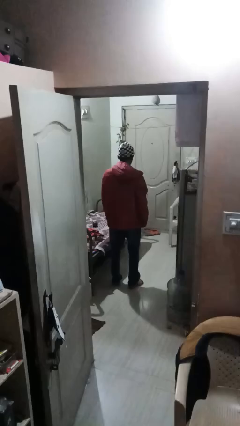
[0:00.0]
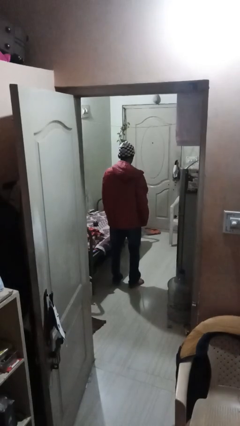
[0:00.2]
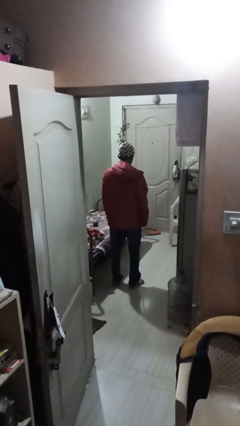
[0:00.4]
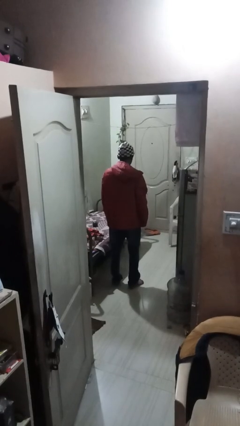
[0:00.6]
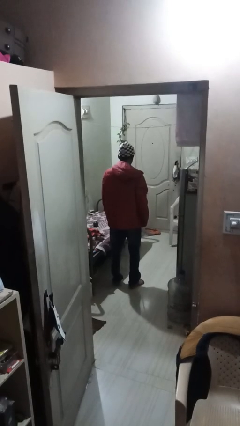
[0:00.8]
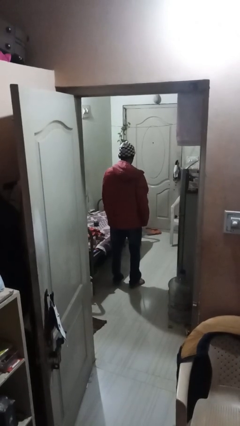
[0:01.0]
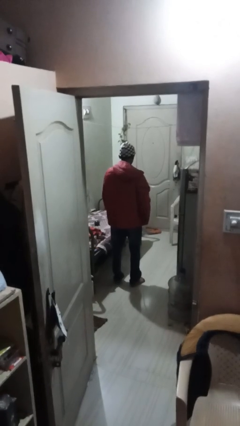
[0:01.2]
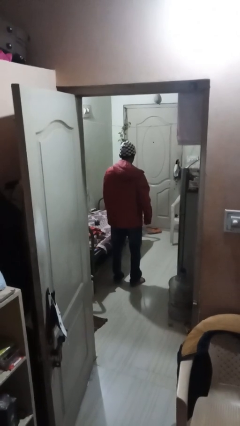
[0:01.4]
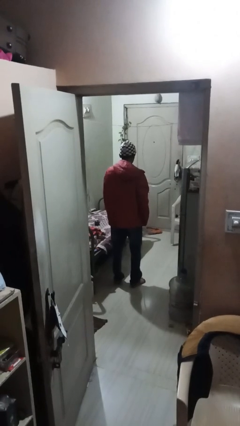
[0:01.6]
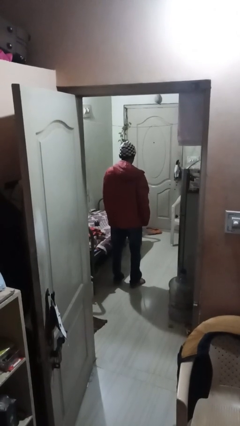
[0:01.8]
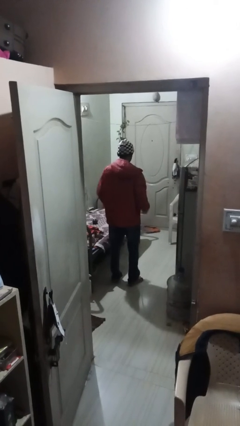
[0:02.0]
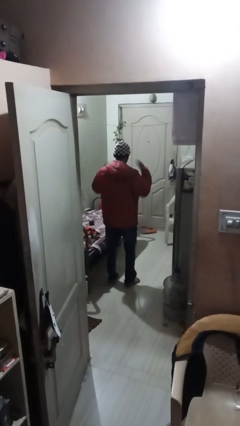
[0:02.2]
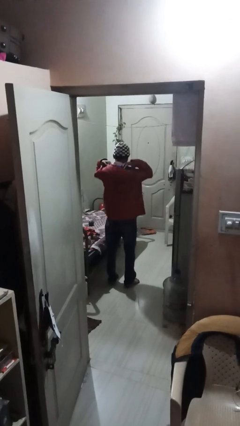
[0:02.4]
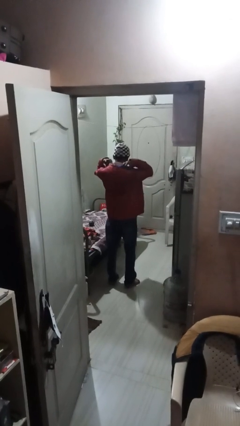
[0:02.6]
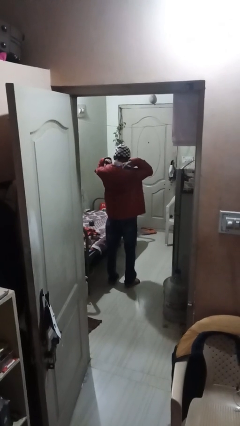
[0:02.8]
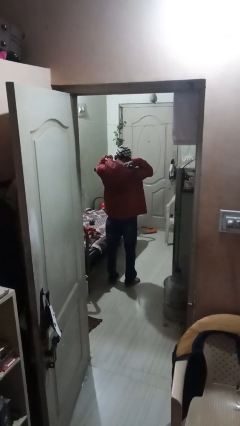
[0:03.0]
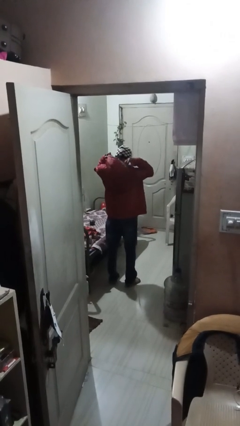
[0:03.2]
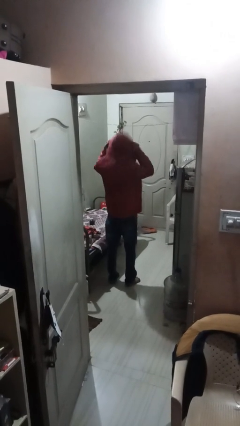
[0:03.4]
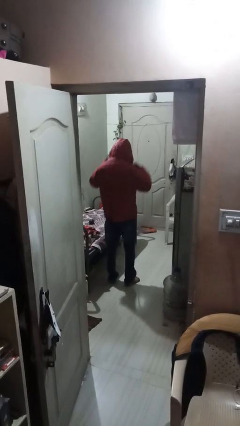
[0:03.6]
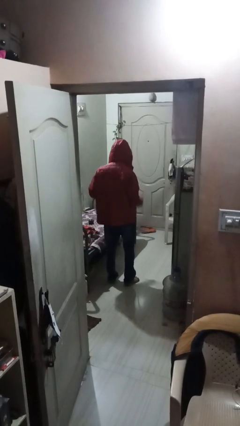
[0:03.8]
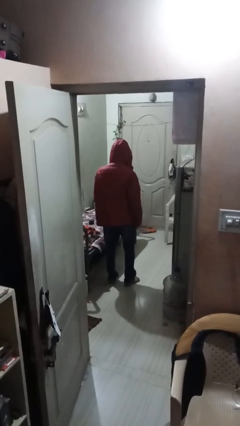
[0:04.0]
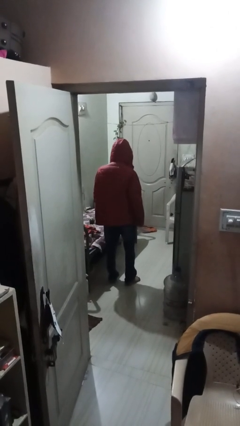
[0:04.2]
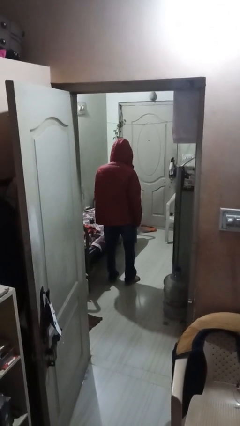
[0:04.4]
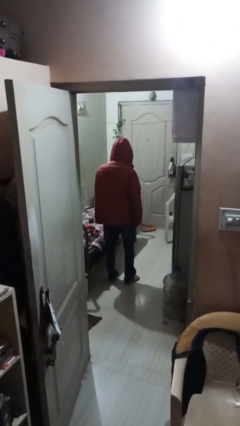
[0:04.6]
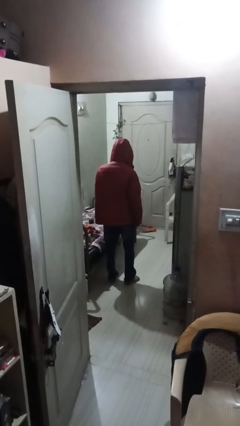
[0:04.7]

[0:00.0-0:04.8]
person puts on hoodie

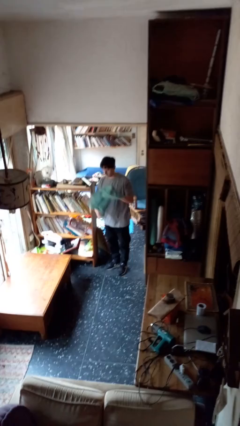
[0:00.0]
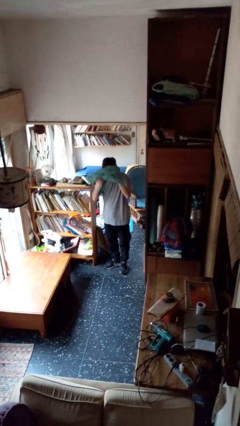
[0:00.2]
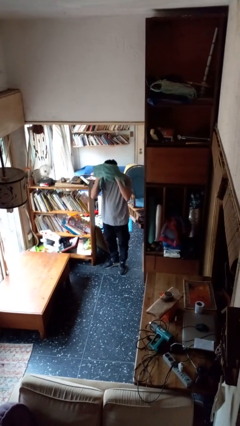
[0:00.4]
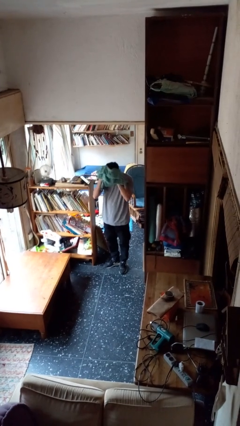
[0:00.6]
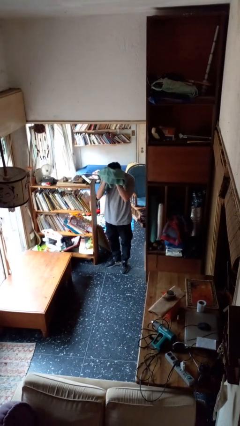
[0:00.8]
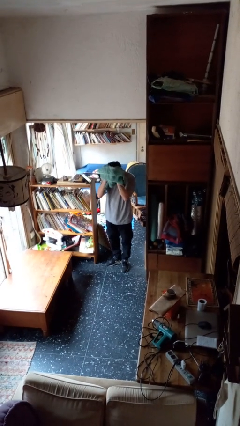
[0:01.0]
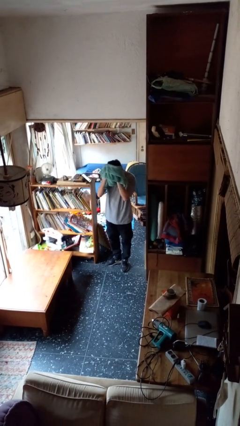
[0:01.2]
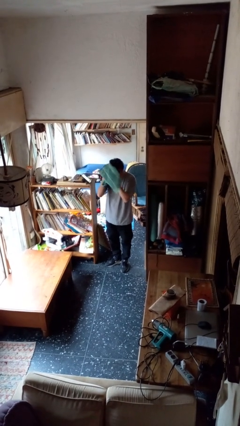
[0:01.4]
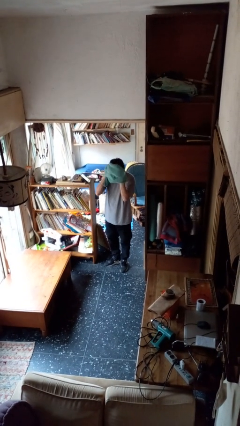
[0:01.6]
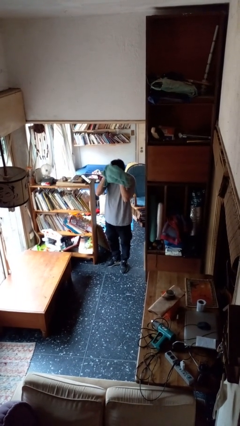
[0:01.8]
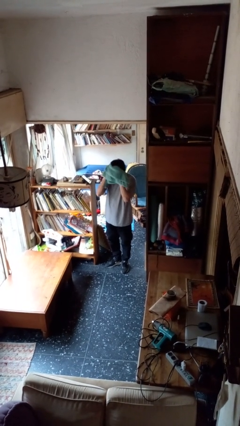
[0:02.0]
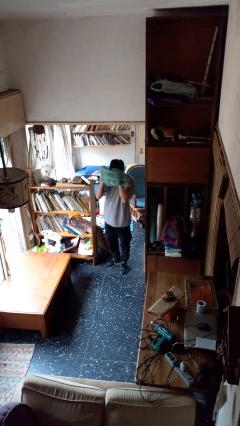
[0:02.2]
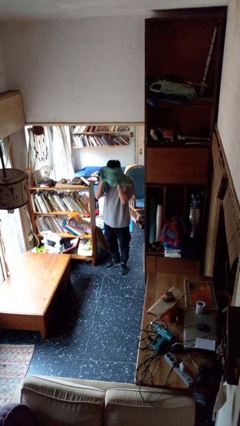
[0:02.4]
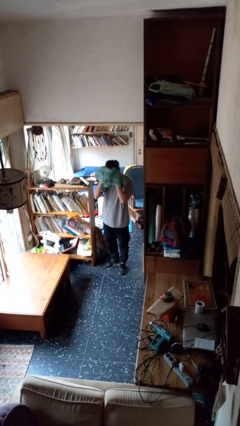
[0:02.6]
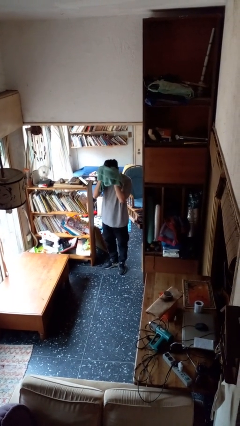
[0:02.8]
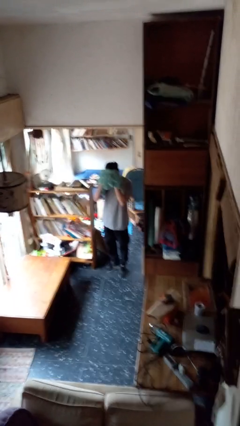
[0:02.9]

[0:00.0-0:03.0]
person dries hair with towel

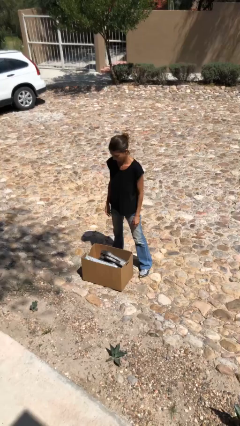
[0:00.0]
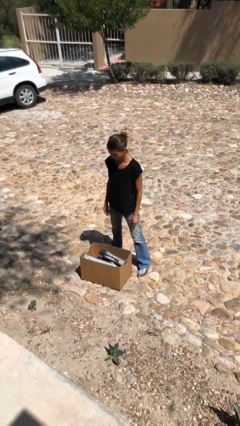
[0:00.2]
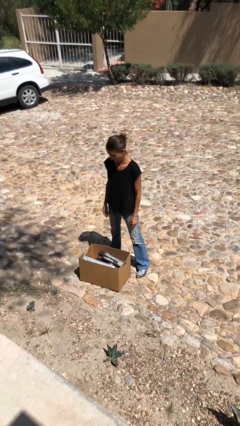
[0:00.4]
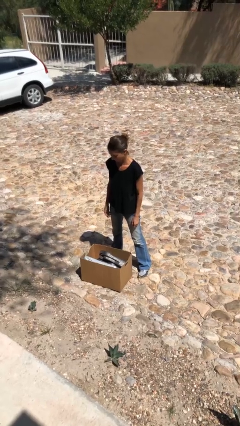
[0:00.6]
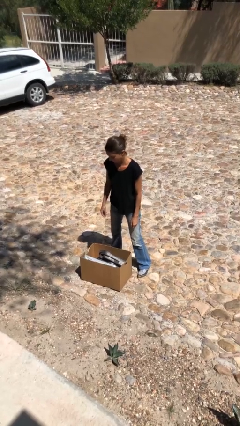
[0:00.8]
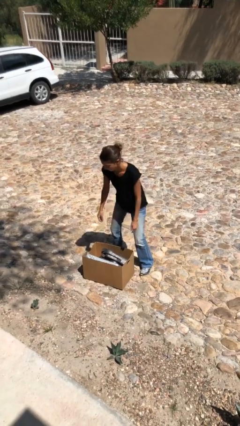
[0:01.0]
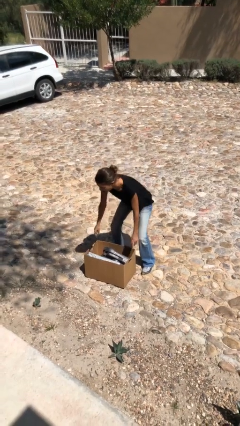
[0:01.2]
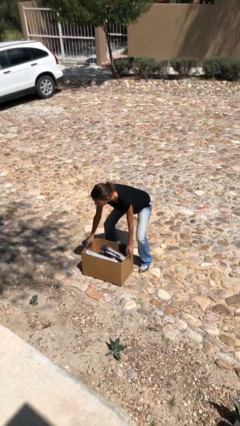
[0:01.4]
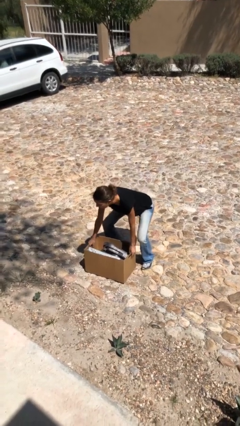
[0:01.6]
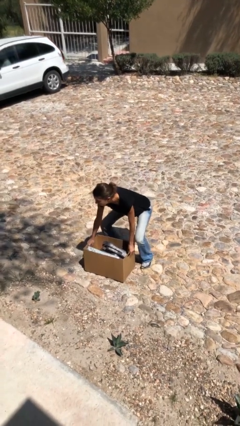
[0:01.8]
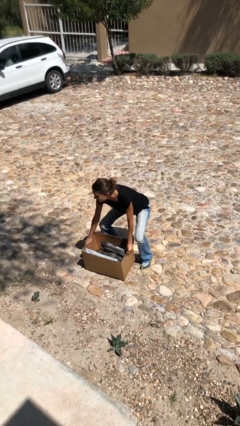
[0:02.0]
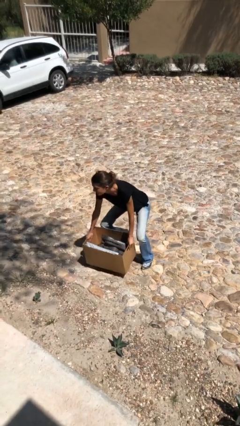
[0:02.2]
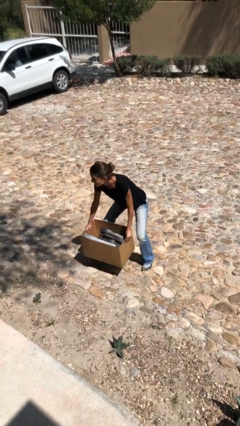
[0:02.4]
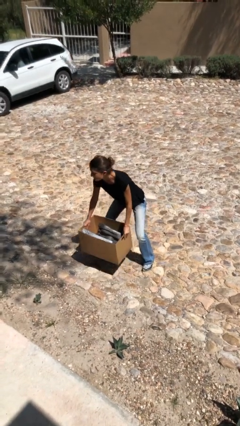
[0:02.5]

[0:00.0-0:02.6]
person picks up object from floor

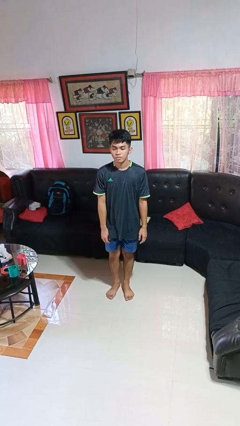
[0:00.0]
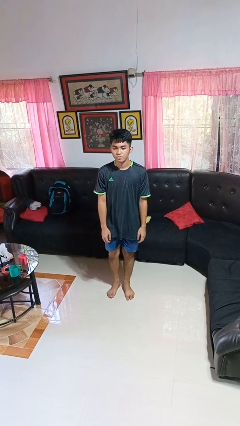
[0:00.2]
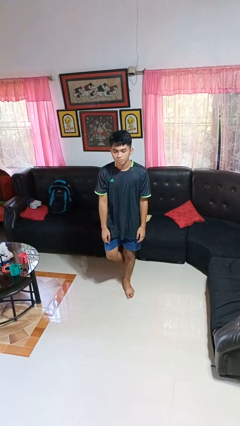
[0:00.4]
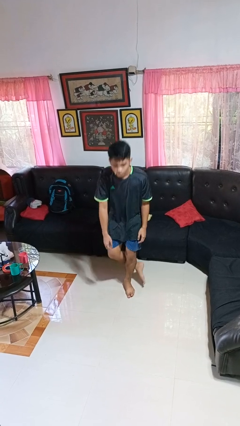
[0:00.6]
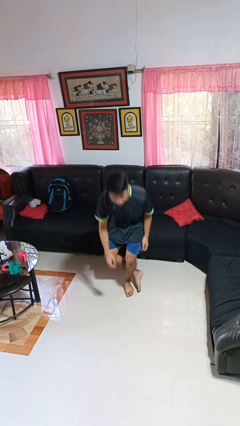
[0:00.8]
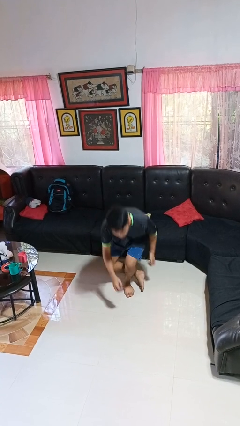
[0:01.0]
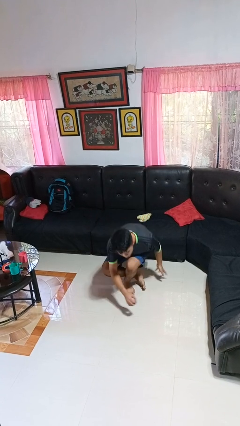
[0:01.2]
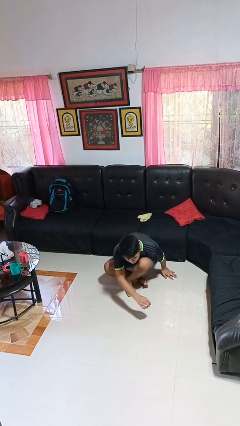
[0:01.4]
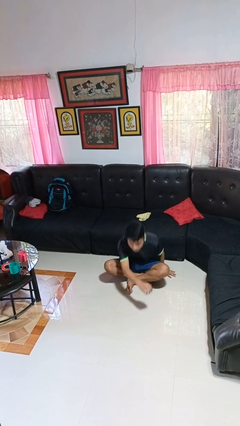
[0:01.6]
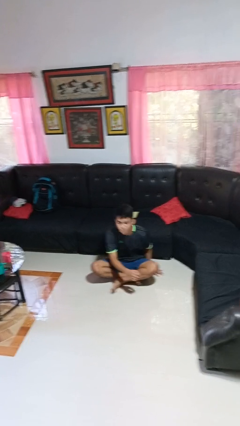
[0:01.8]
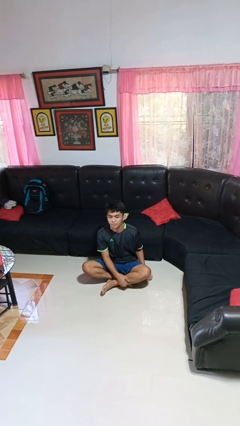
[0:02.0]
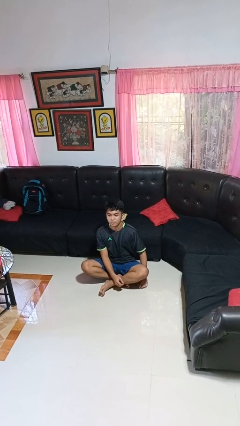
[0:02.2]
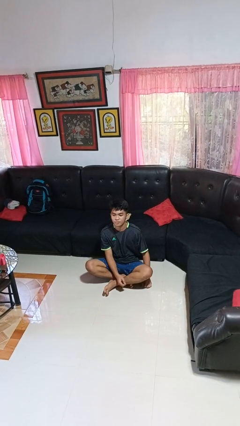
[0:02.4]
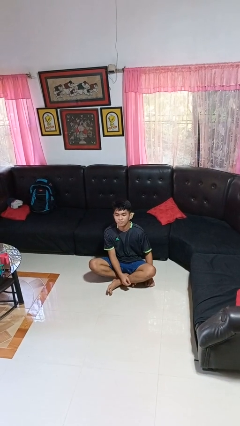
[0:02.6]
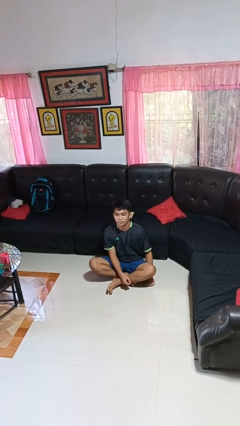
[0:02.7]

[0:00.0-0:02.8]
person sits crisscross

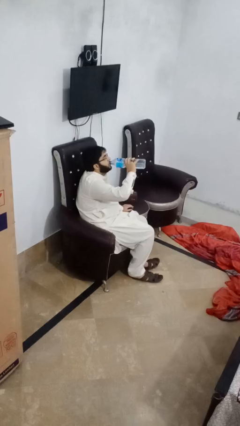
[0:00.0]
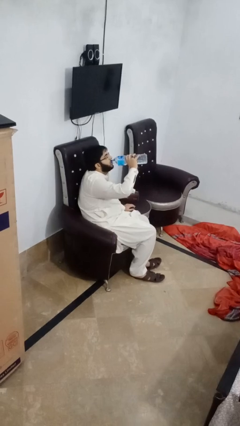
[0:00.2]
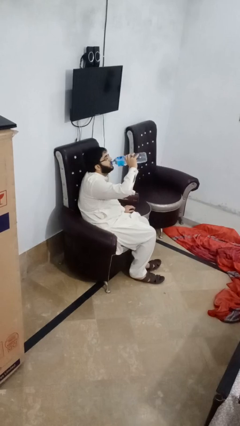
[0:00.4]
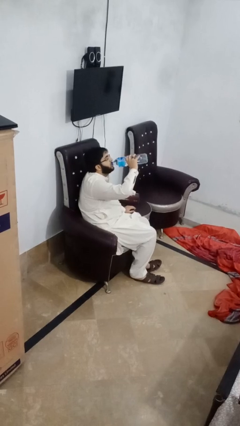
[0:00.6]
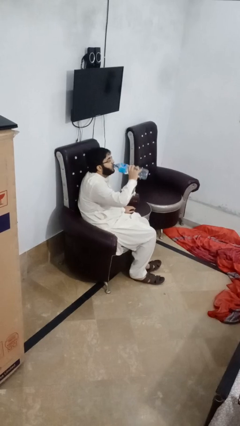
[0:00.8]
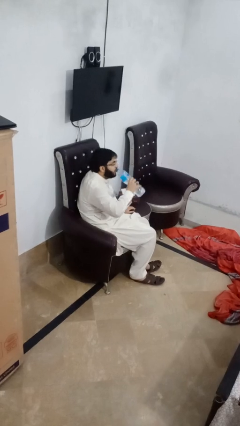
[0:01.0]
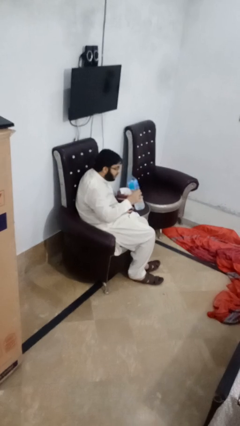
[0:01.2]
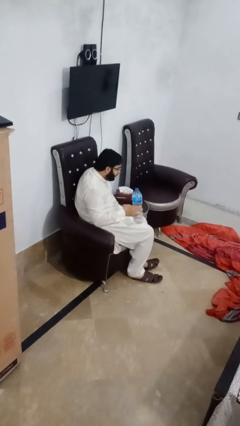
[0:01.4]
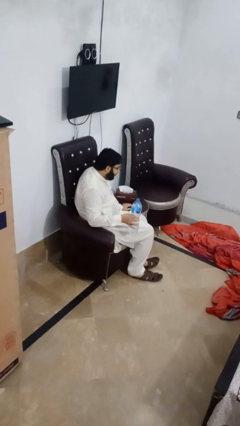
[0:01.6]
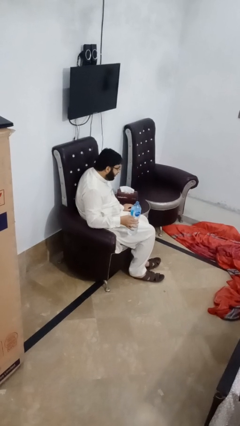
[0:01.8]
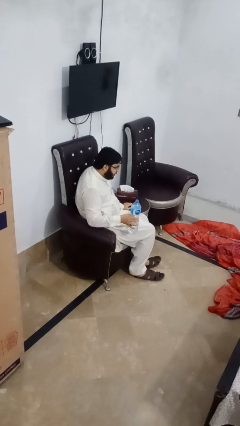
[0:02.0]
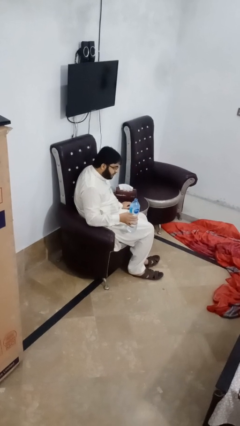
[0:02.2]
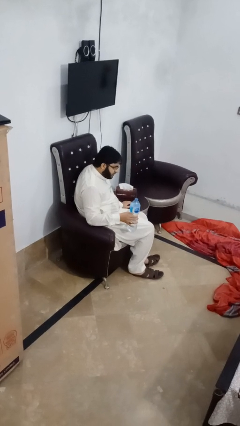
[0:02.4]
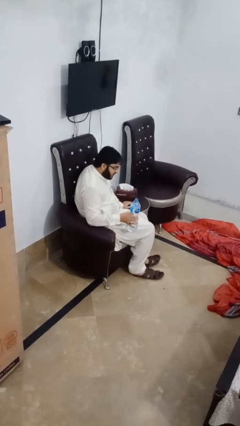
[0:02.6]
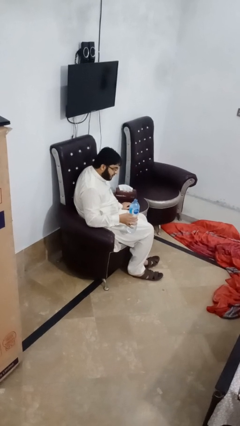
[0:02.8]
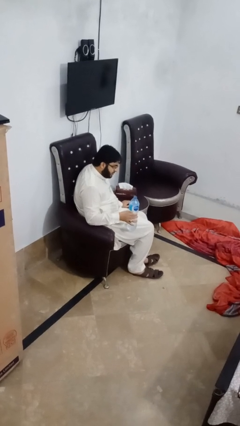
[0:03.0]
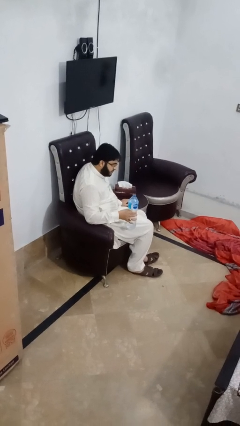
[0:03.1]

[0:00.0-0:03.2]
person drinks from bottle

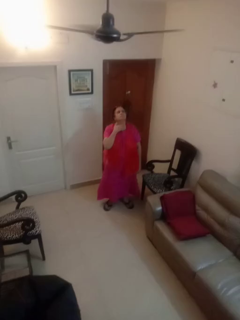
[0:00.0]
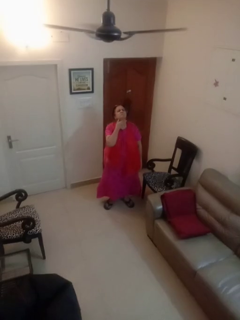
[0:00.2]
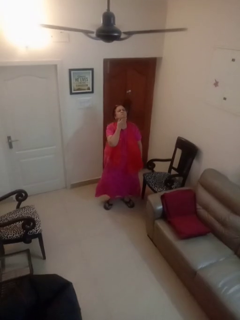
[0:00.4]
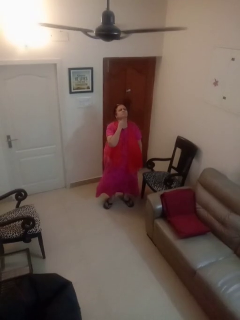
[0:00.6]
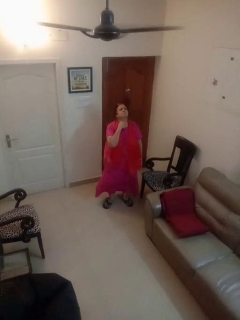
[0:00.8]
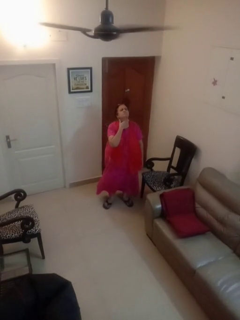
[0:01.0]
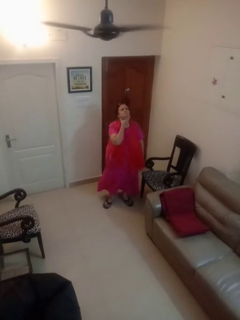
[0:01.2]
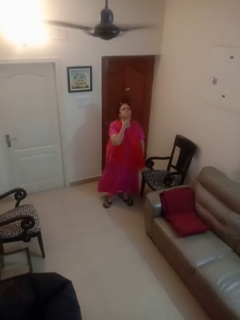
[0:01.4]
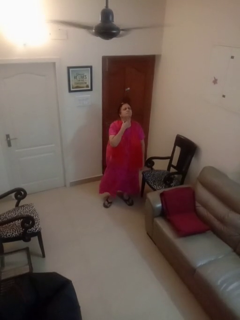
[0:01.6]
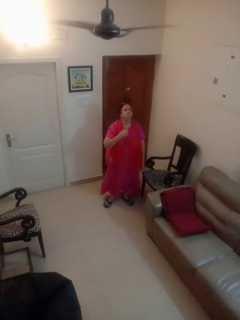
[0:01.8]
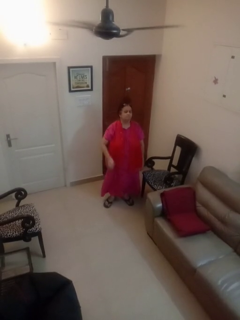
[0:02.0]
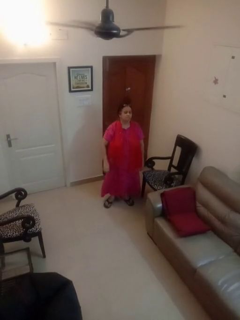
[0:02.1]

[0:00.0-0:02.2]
person rubs neck
